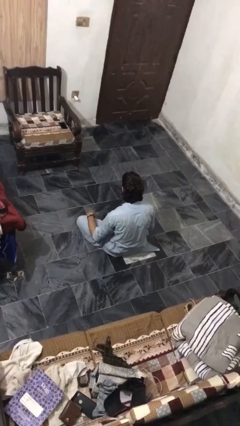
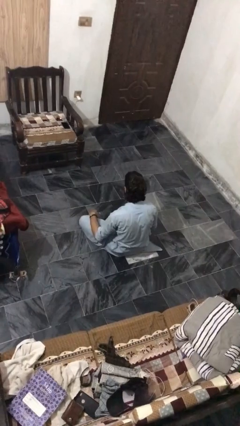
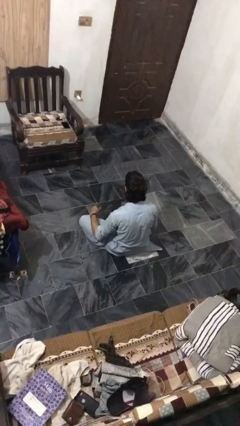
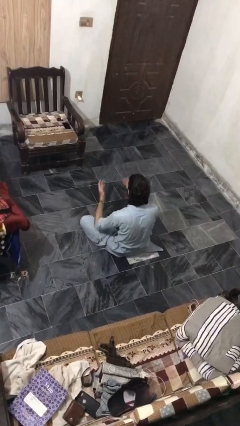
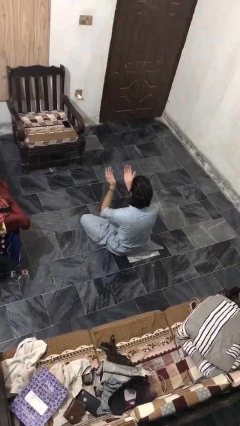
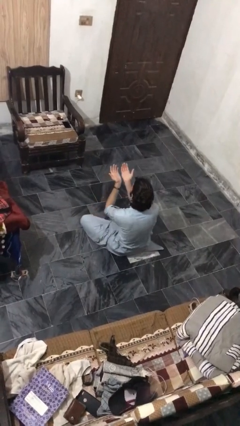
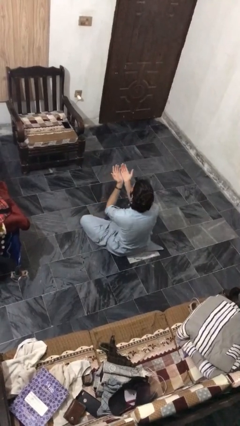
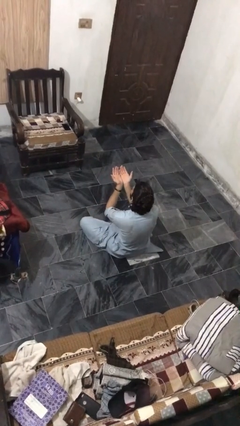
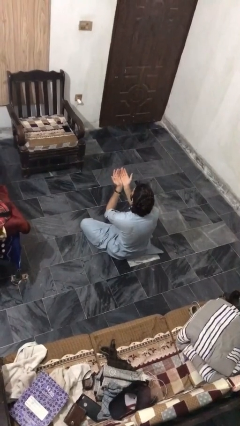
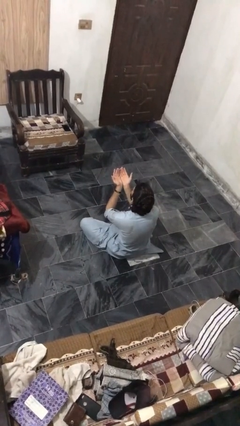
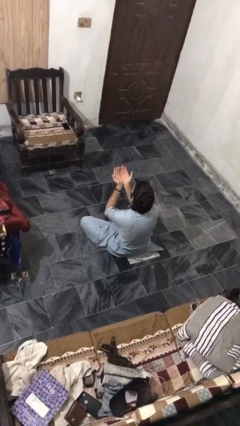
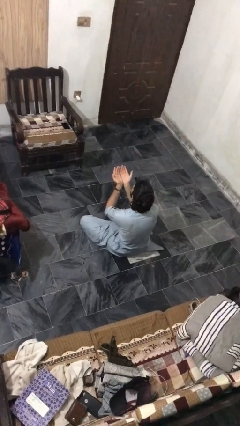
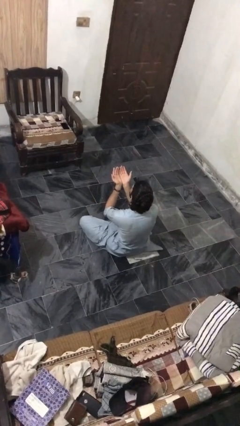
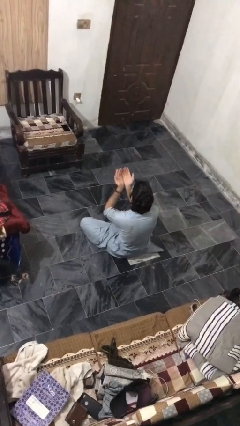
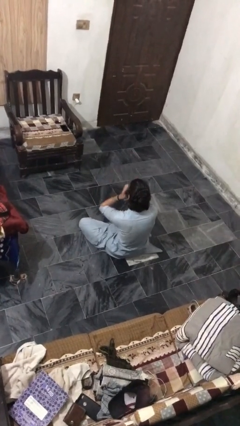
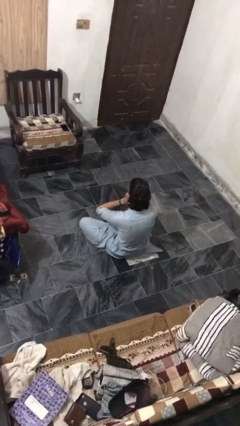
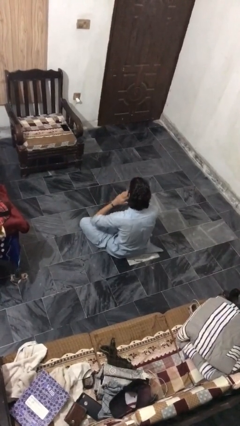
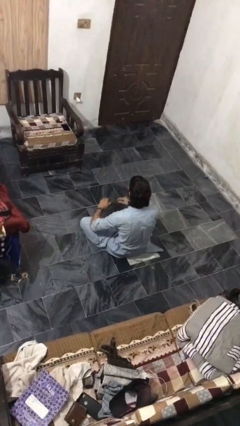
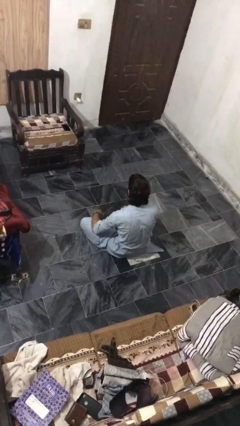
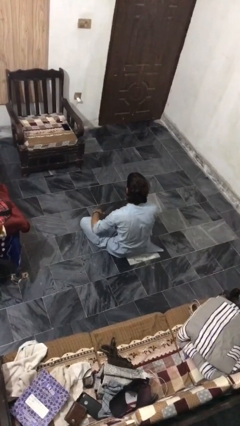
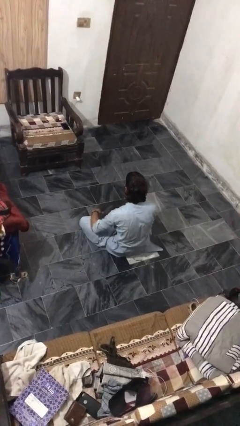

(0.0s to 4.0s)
person prays

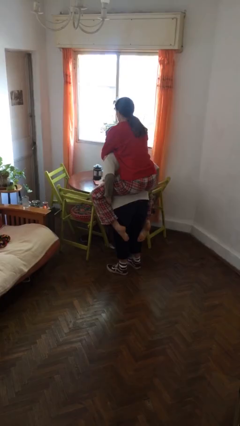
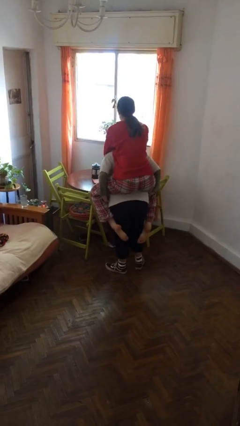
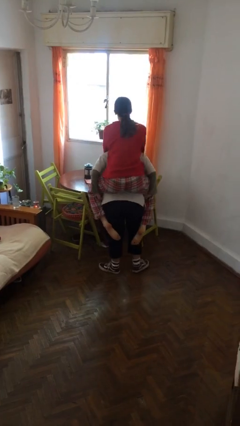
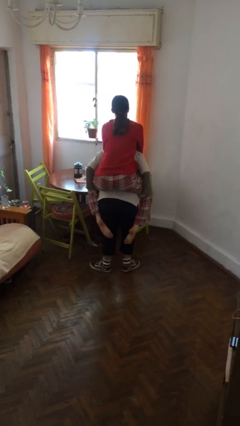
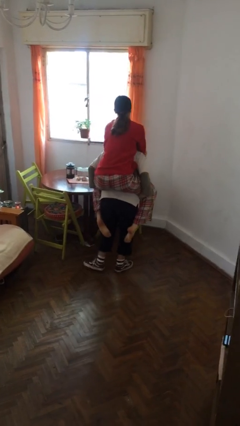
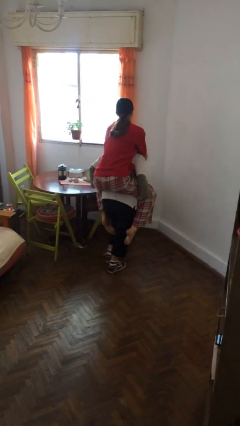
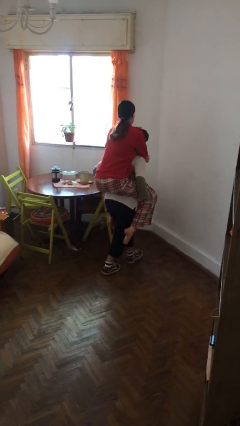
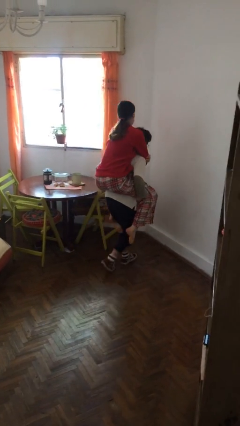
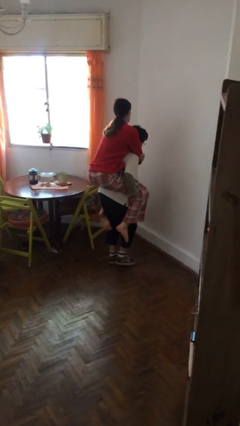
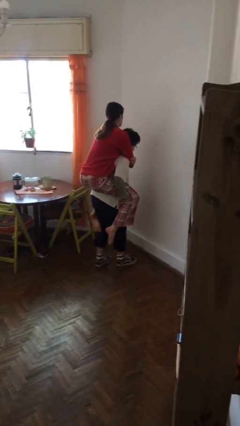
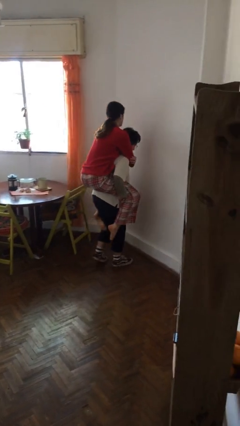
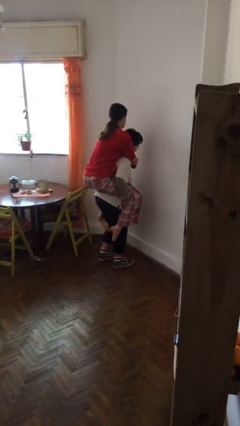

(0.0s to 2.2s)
person carries person on back

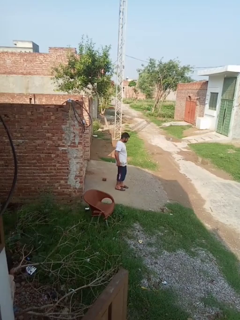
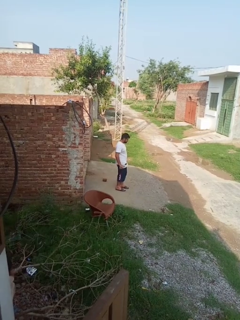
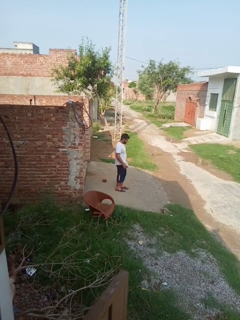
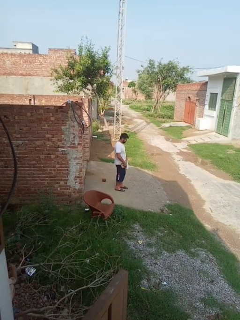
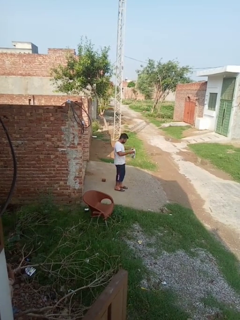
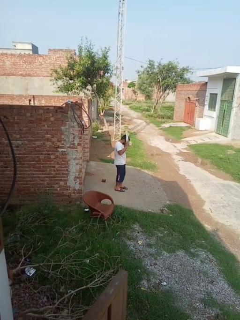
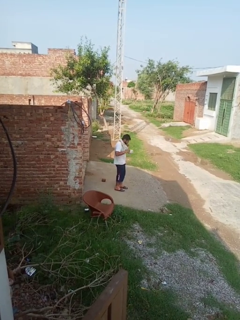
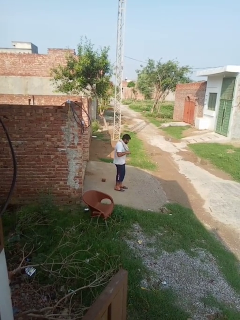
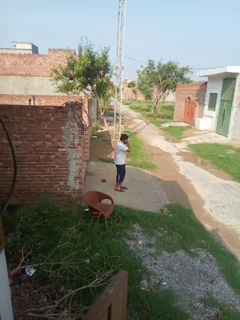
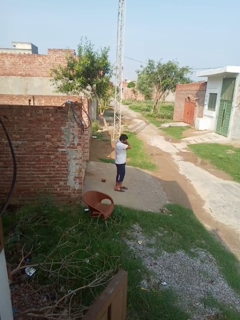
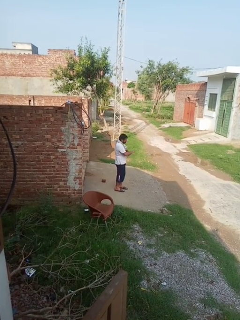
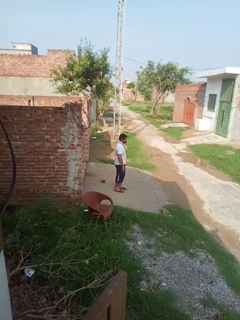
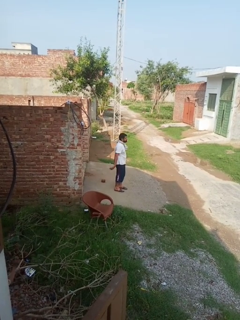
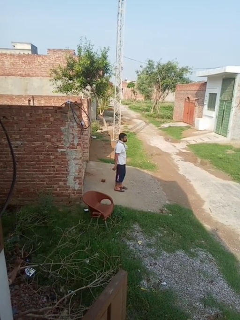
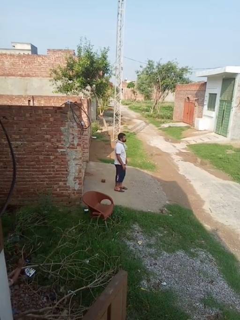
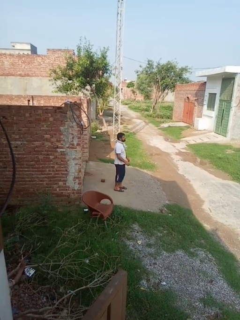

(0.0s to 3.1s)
person puts on scarf

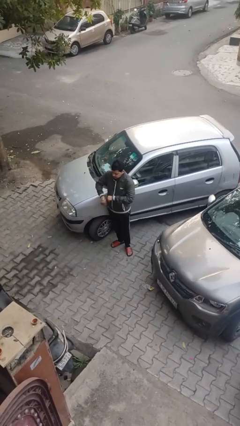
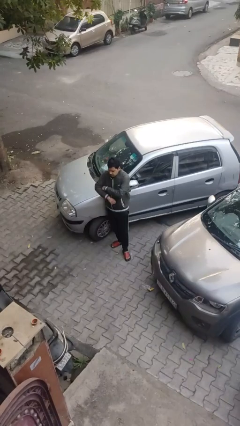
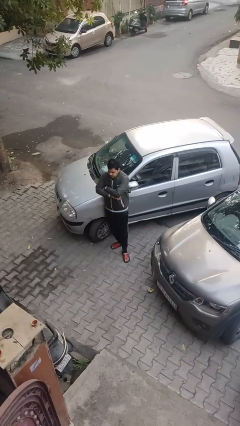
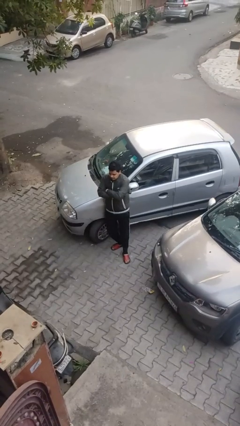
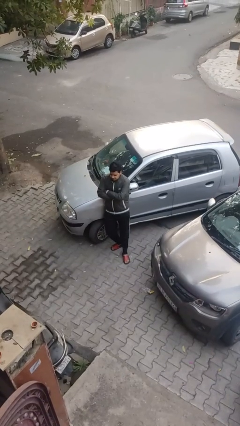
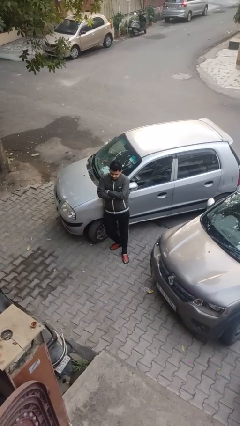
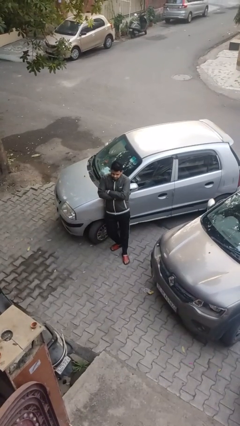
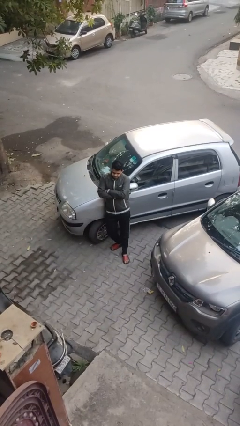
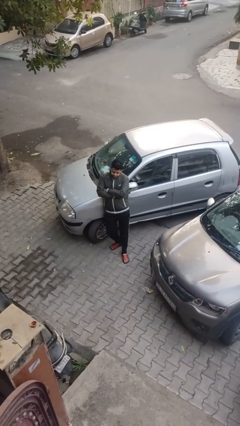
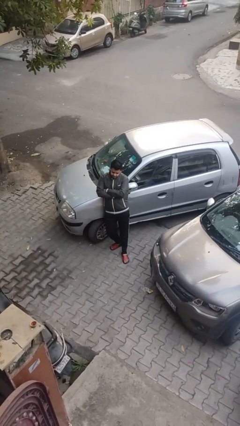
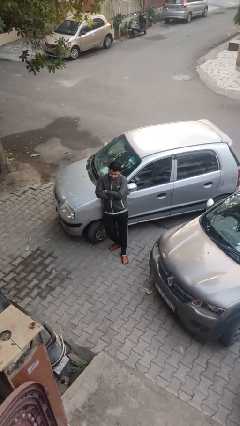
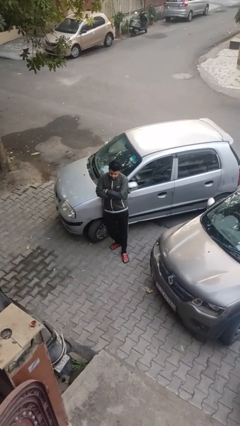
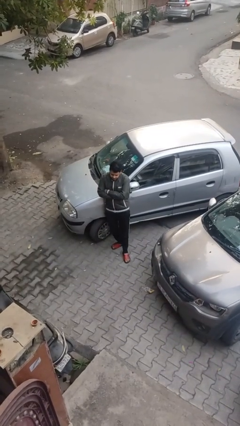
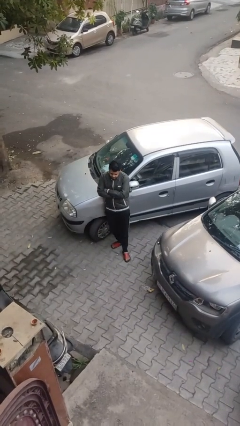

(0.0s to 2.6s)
person leans against car

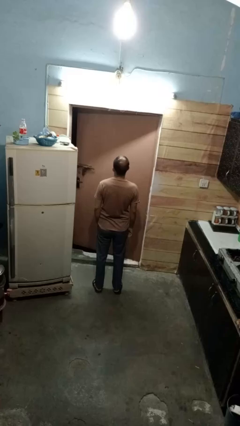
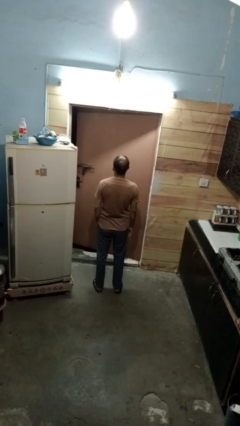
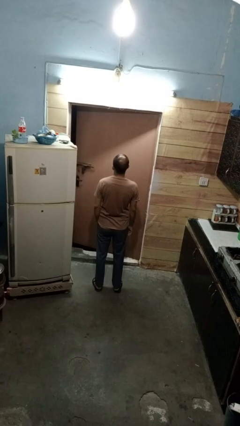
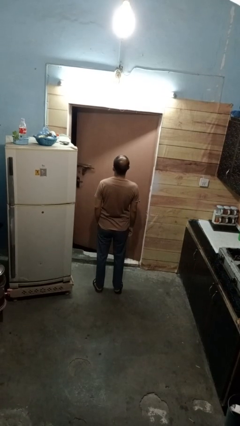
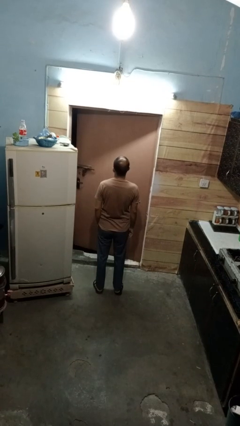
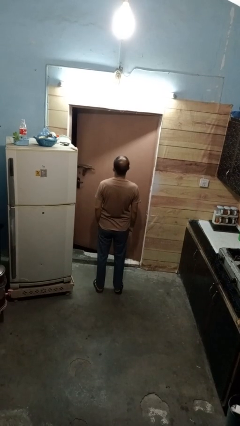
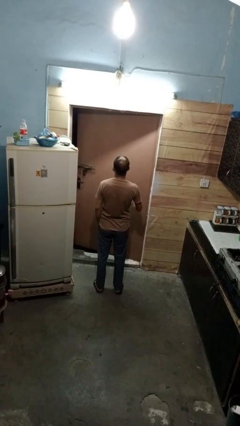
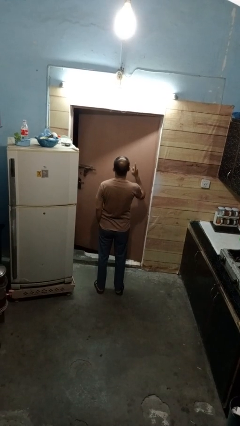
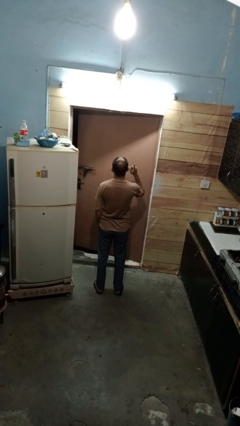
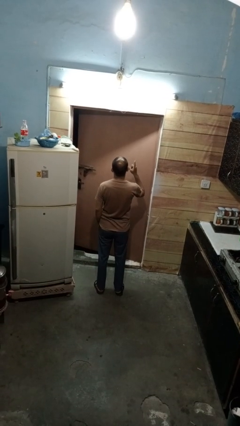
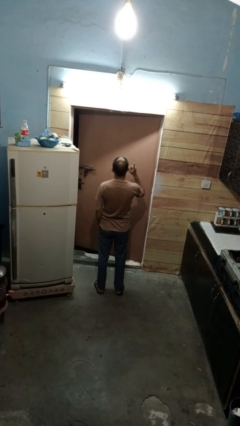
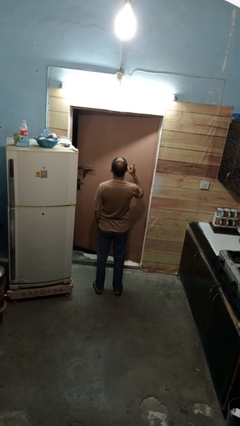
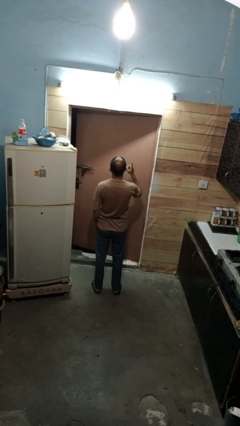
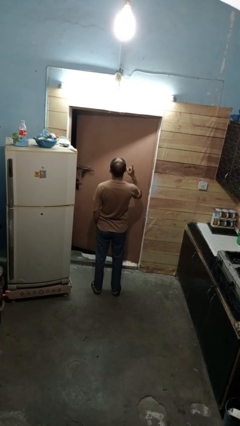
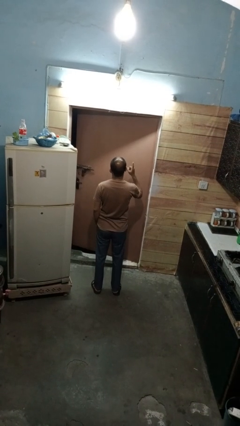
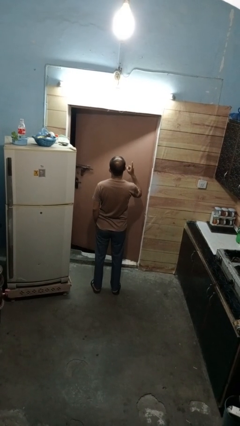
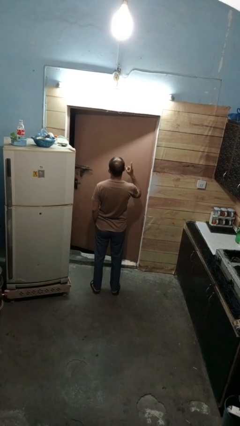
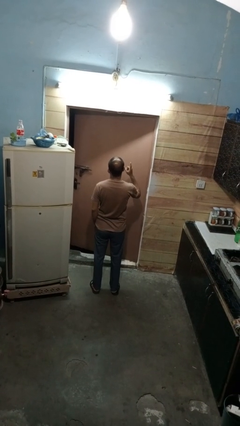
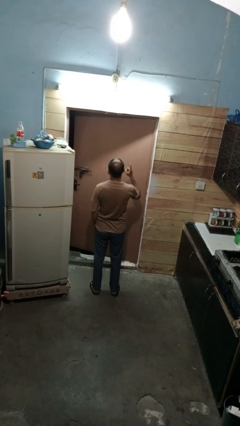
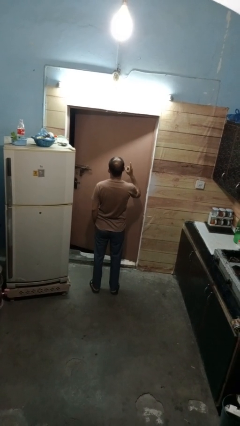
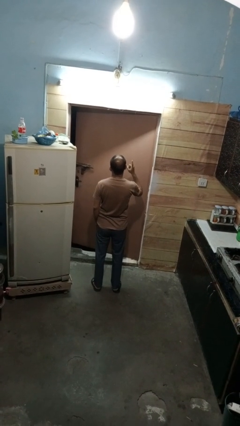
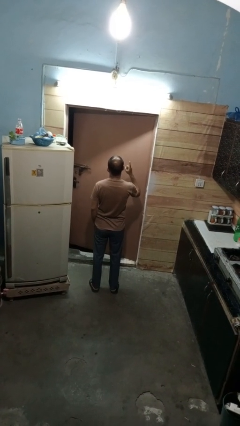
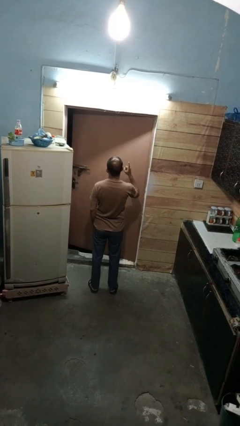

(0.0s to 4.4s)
person gestures number one

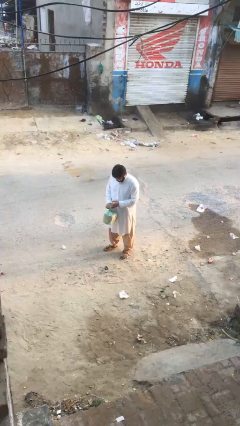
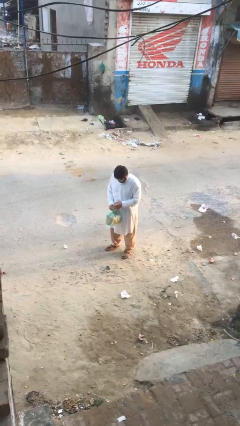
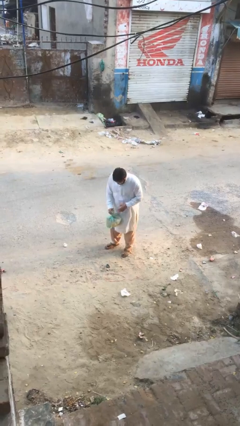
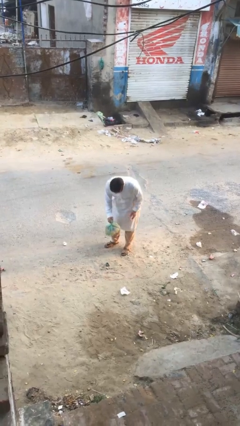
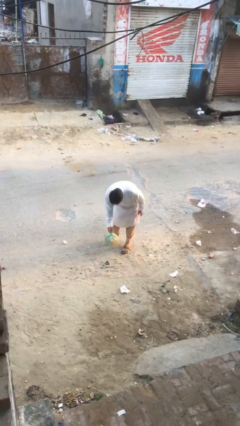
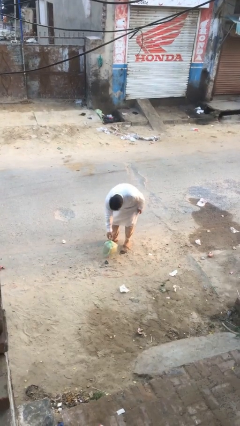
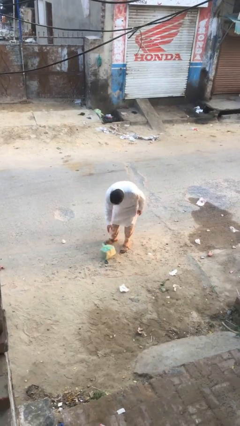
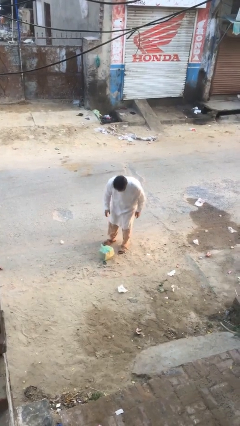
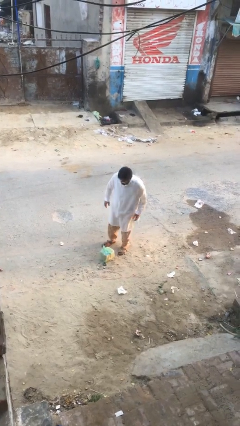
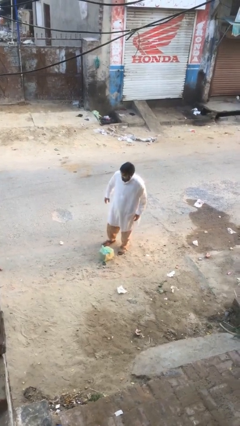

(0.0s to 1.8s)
person puts down object on floor
